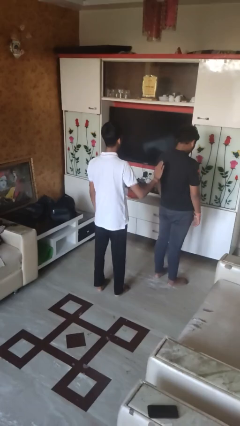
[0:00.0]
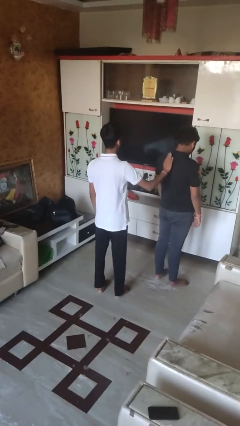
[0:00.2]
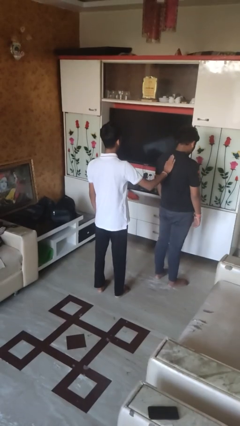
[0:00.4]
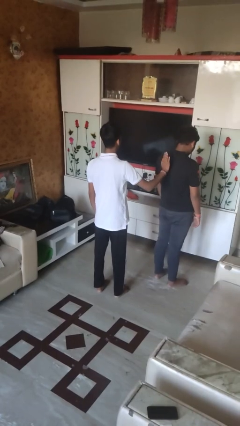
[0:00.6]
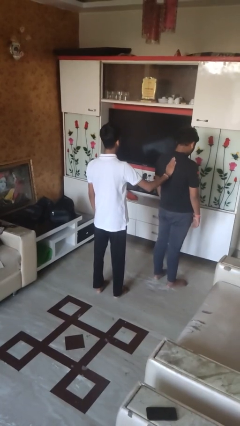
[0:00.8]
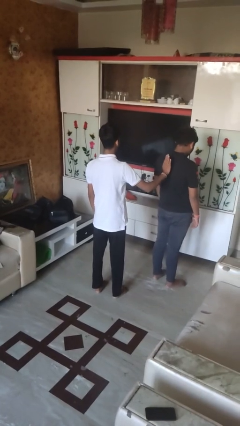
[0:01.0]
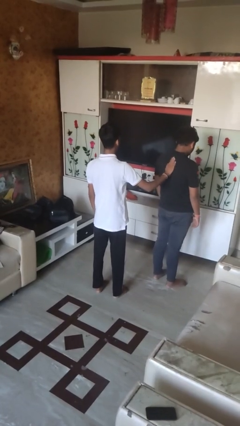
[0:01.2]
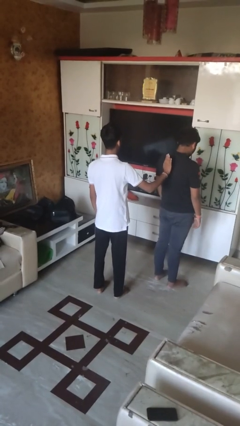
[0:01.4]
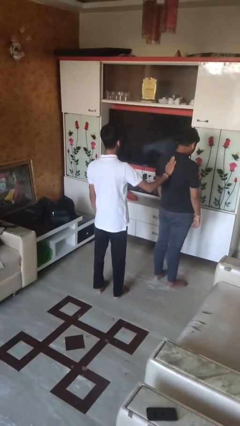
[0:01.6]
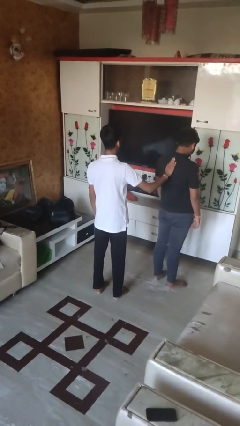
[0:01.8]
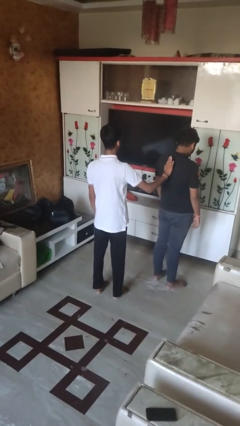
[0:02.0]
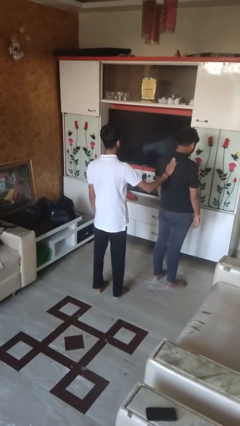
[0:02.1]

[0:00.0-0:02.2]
person touches back of person

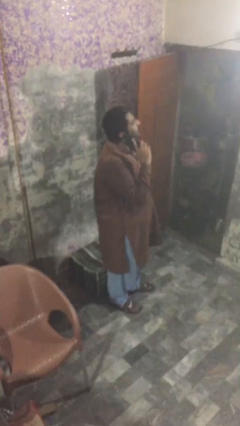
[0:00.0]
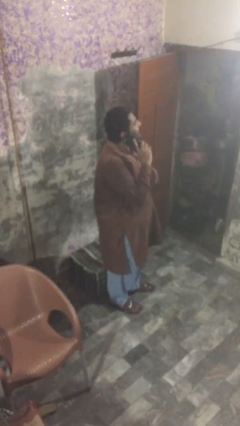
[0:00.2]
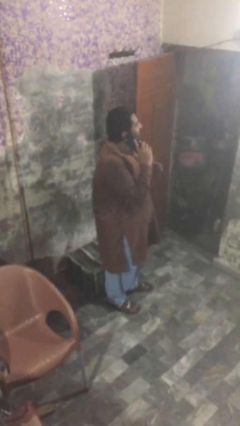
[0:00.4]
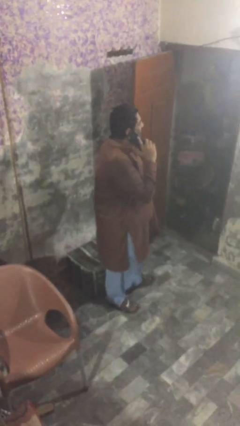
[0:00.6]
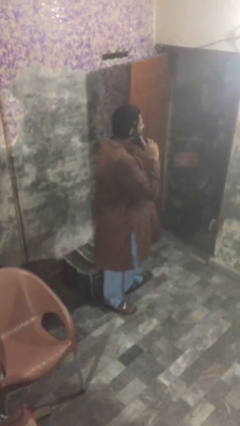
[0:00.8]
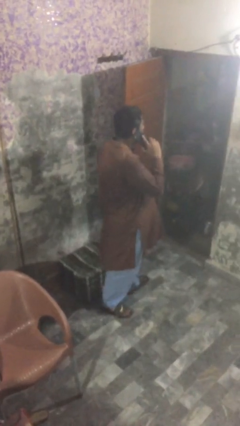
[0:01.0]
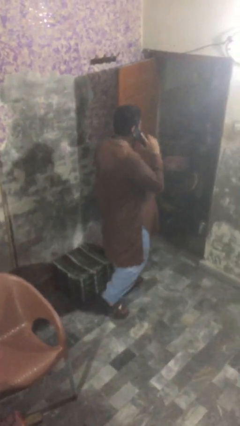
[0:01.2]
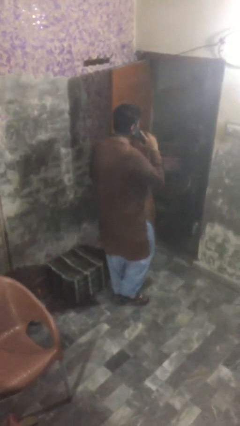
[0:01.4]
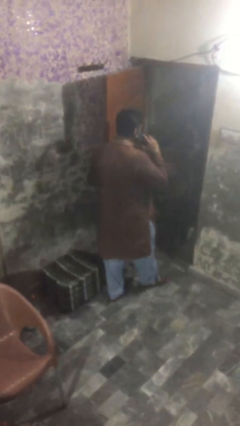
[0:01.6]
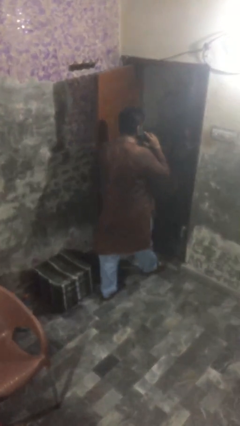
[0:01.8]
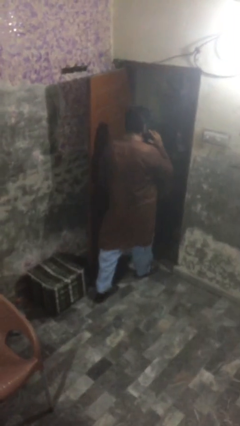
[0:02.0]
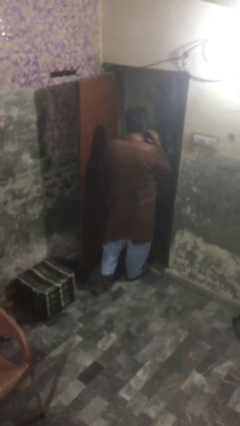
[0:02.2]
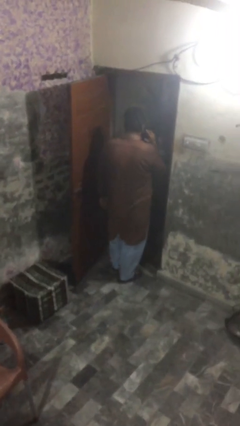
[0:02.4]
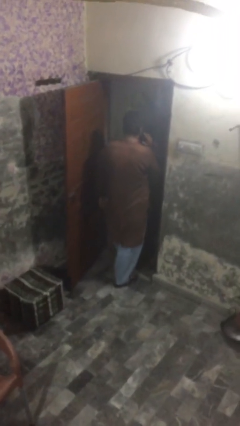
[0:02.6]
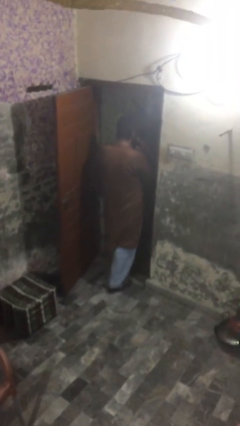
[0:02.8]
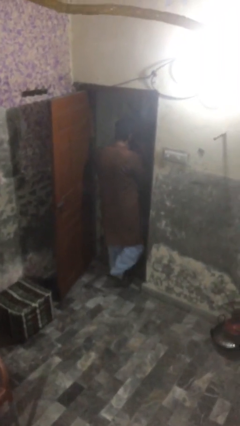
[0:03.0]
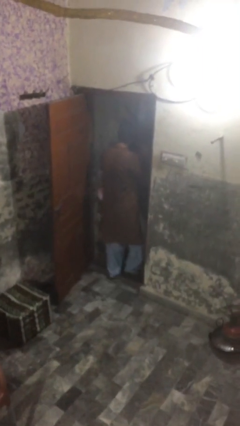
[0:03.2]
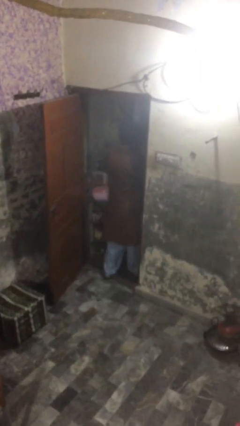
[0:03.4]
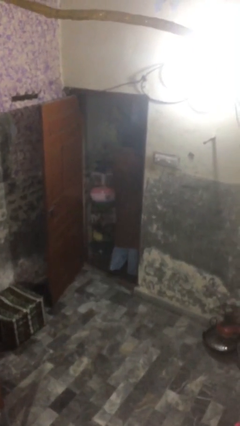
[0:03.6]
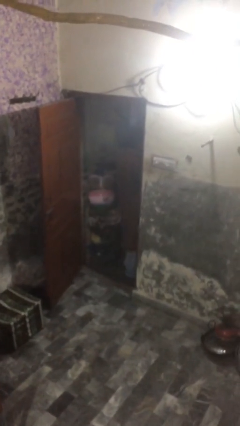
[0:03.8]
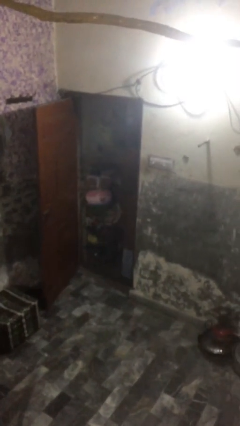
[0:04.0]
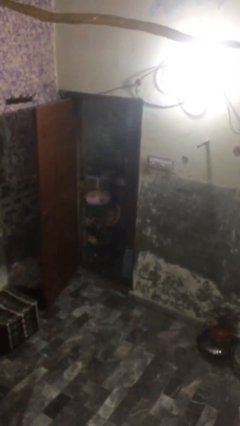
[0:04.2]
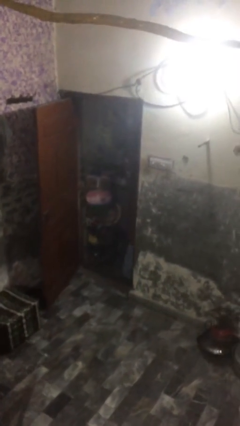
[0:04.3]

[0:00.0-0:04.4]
person exits scene through structure

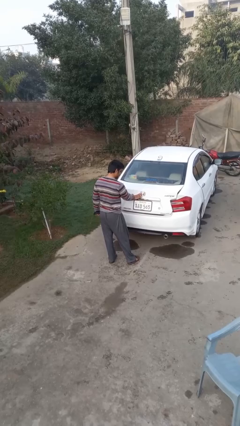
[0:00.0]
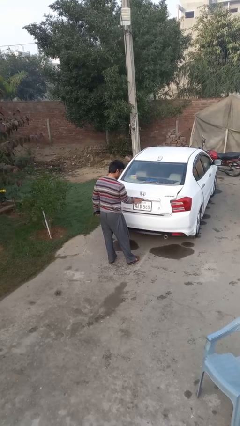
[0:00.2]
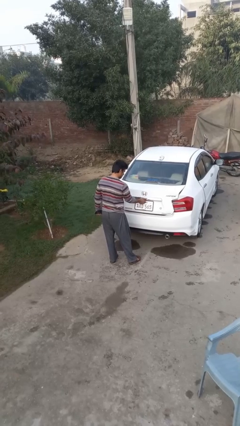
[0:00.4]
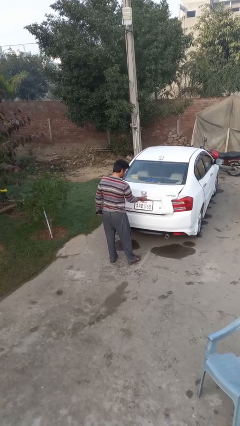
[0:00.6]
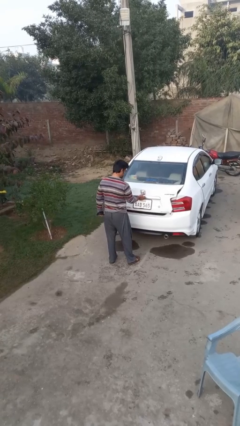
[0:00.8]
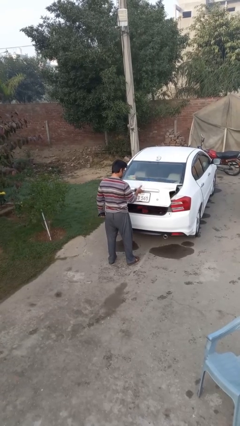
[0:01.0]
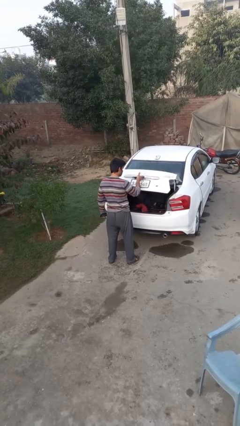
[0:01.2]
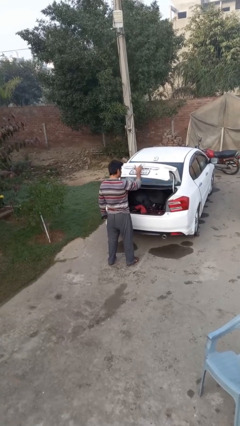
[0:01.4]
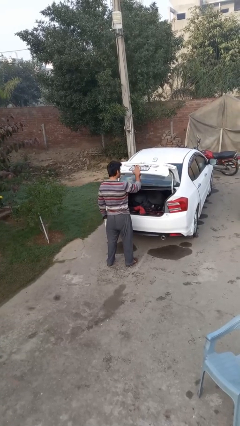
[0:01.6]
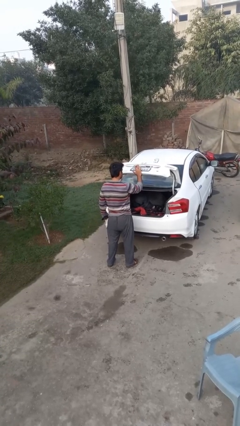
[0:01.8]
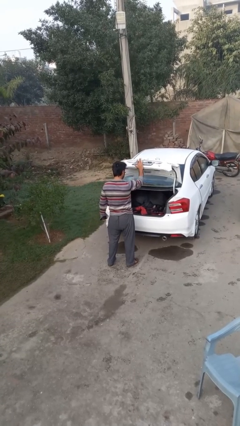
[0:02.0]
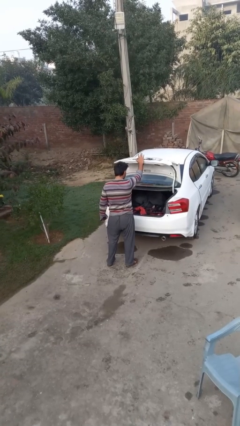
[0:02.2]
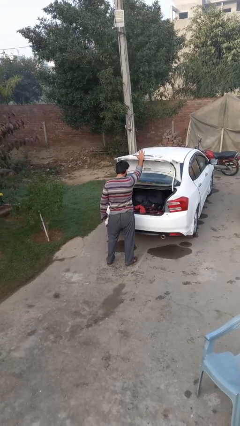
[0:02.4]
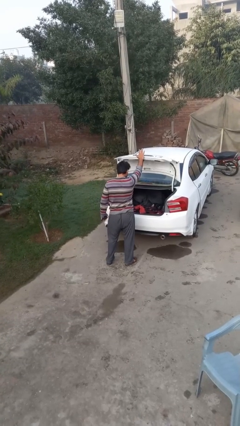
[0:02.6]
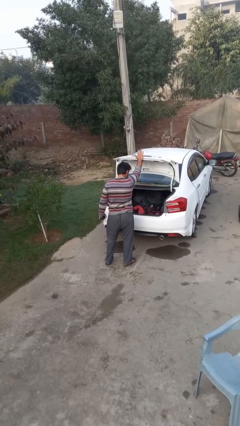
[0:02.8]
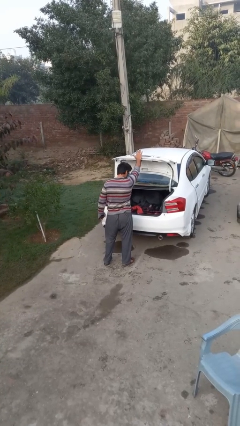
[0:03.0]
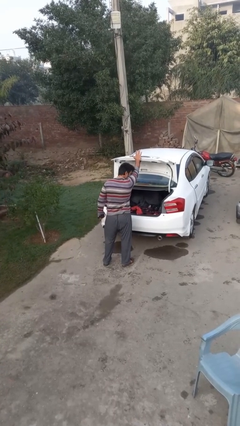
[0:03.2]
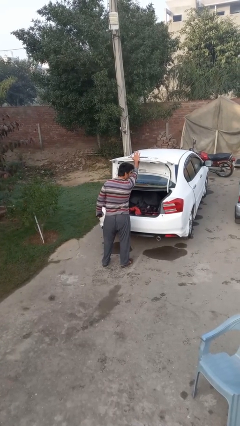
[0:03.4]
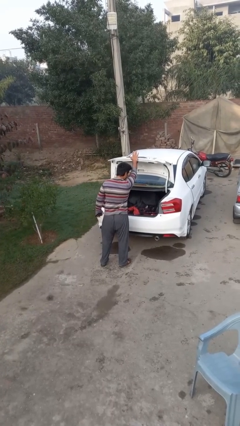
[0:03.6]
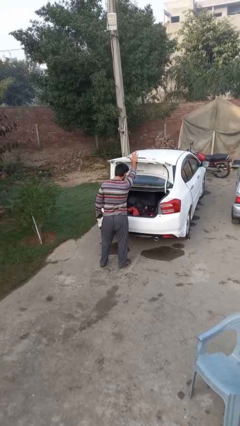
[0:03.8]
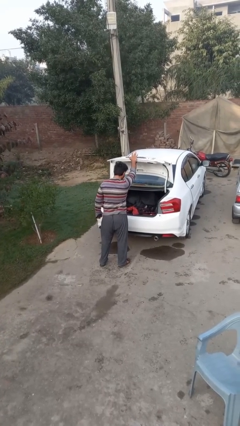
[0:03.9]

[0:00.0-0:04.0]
person opens car trunk

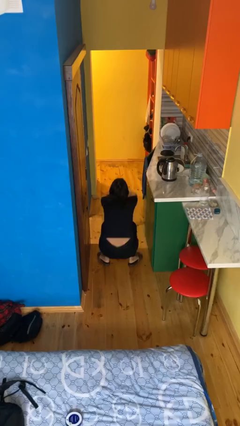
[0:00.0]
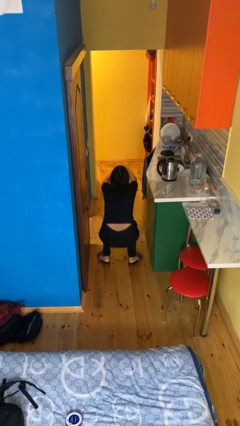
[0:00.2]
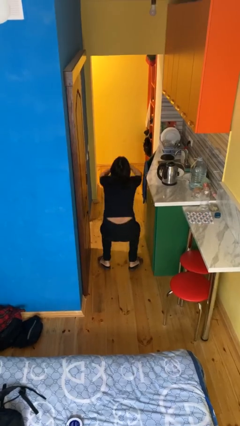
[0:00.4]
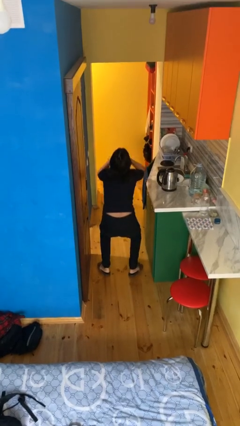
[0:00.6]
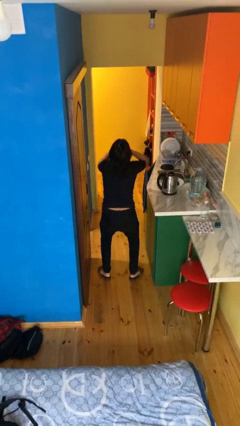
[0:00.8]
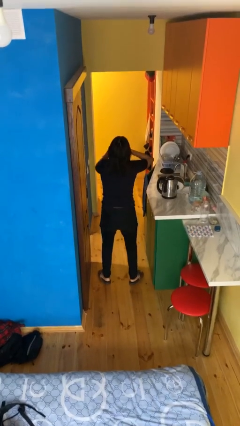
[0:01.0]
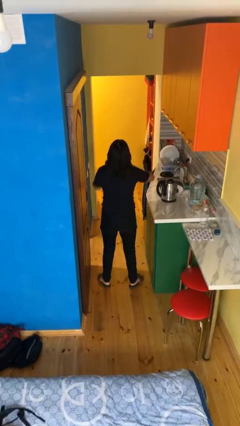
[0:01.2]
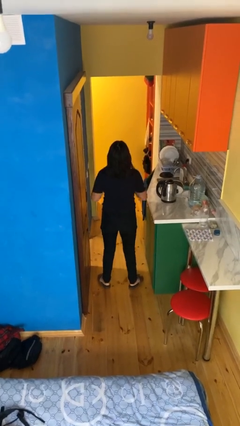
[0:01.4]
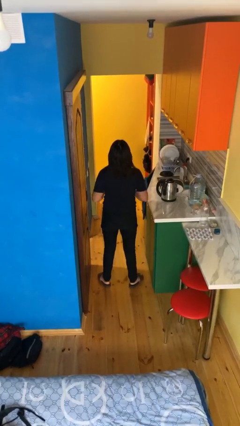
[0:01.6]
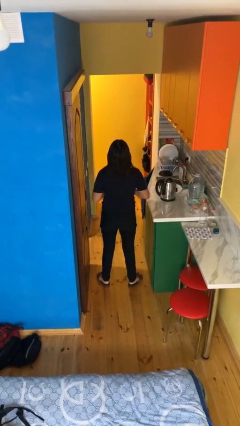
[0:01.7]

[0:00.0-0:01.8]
person stands up

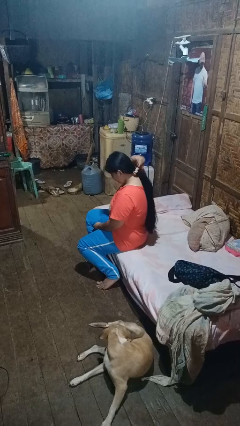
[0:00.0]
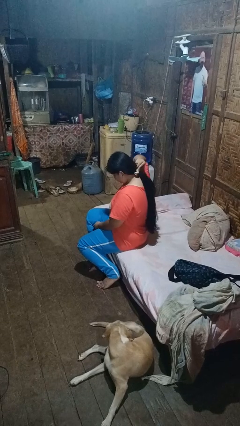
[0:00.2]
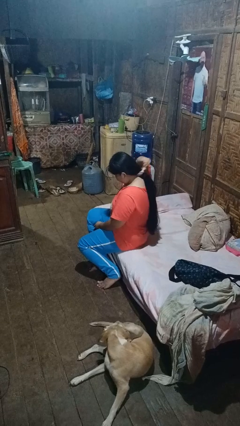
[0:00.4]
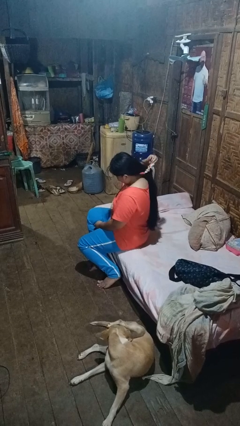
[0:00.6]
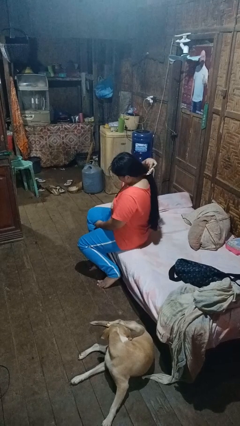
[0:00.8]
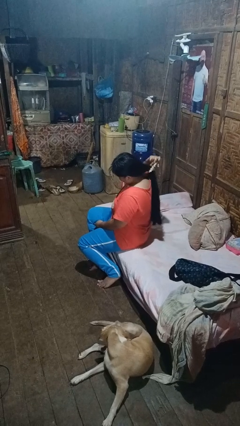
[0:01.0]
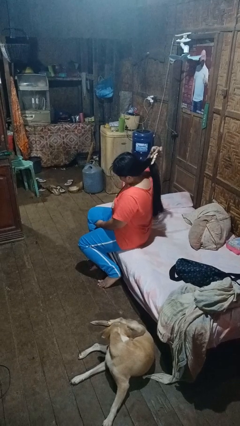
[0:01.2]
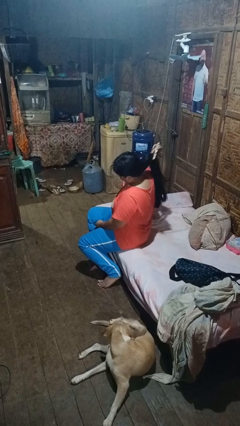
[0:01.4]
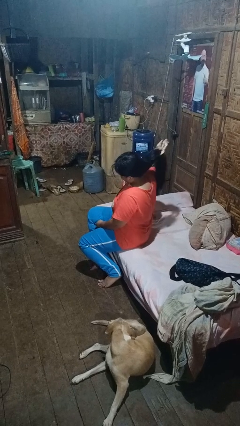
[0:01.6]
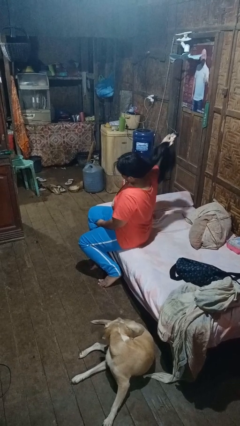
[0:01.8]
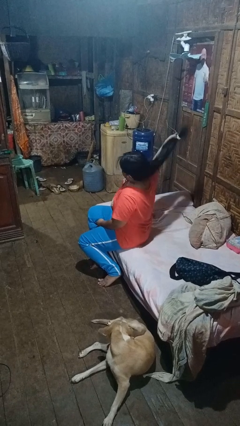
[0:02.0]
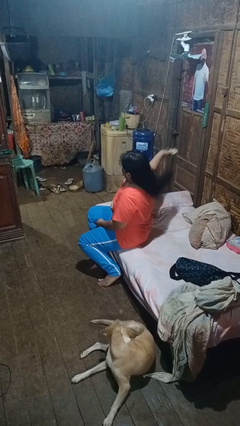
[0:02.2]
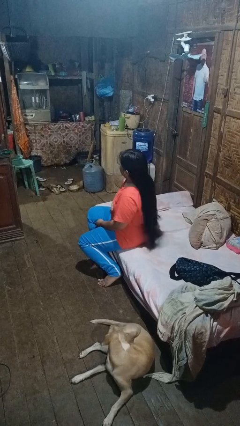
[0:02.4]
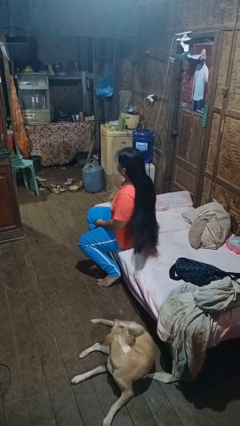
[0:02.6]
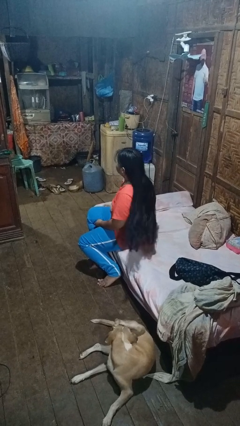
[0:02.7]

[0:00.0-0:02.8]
person takes off hairtie

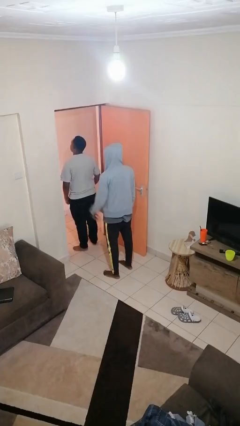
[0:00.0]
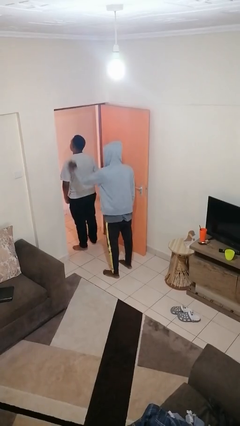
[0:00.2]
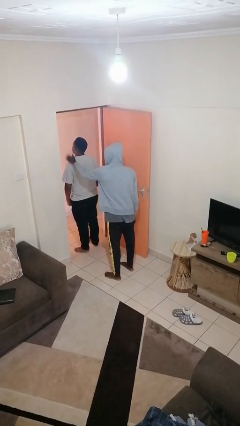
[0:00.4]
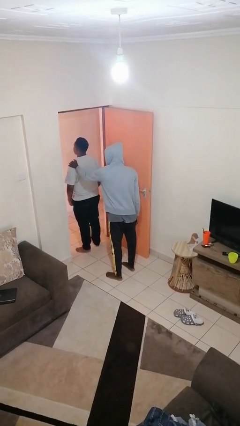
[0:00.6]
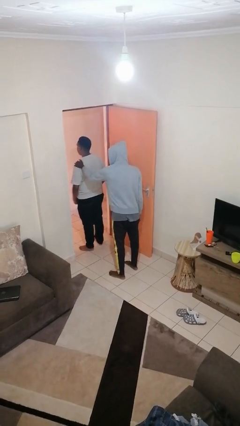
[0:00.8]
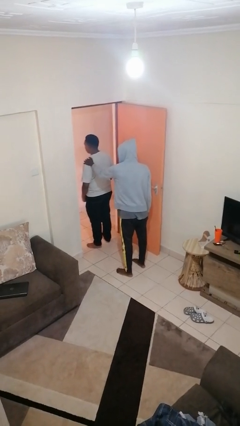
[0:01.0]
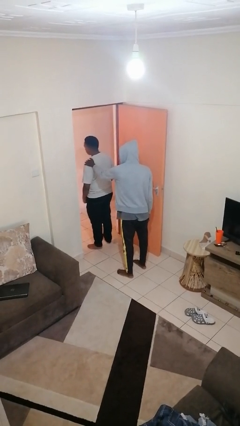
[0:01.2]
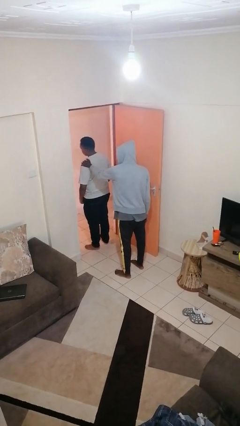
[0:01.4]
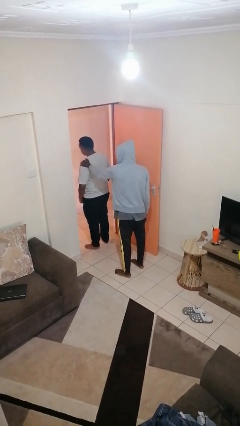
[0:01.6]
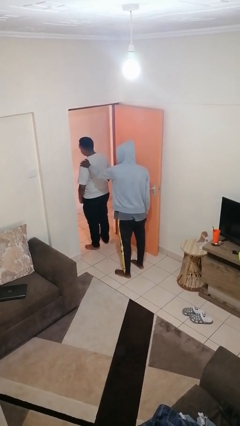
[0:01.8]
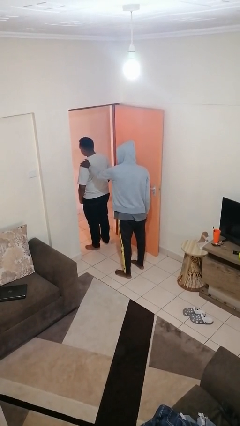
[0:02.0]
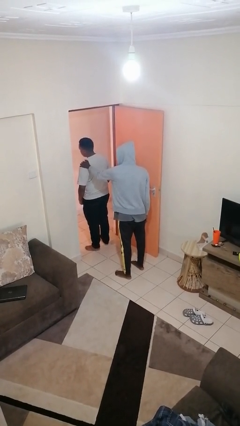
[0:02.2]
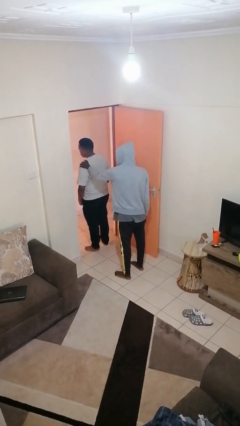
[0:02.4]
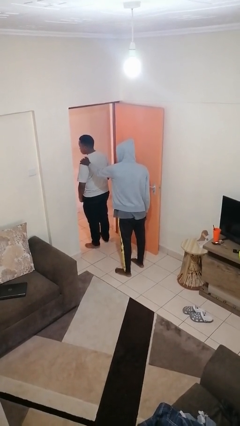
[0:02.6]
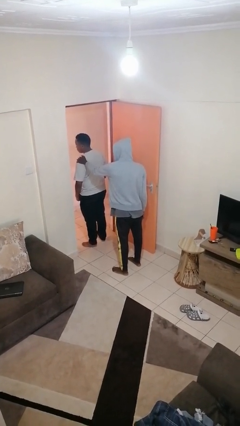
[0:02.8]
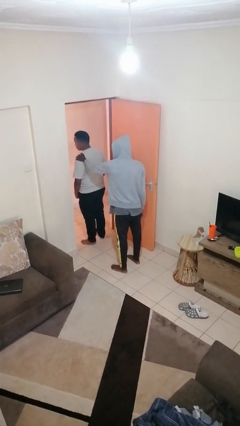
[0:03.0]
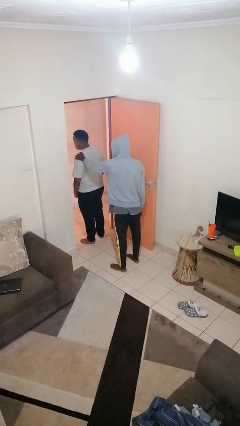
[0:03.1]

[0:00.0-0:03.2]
person grabs person by shoulder
